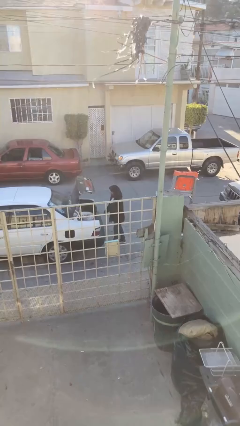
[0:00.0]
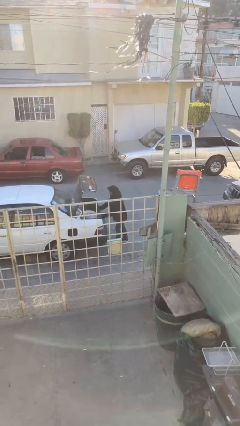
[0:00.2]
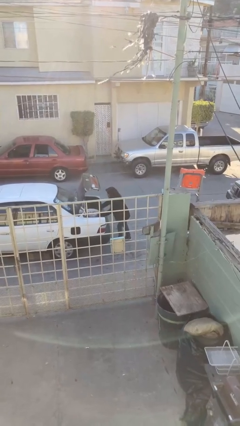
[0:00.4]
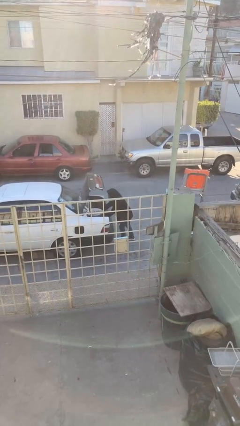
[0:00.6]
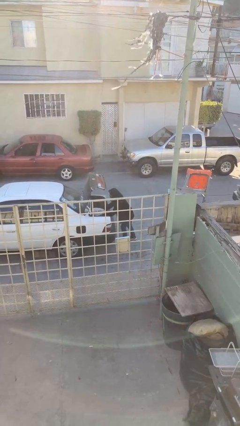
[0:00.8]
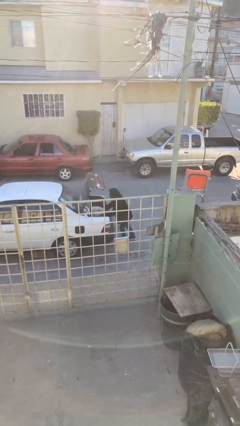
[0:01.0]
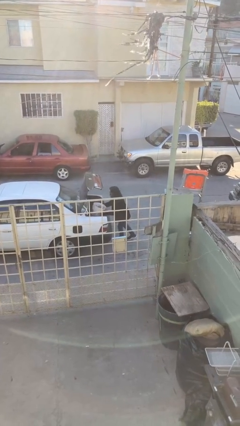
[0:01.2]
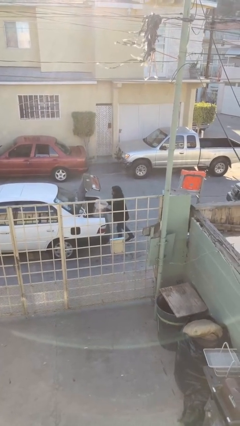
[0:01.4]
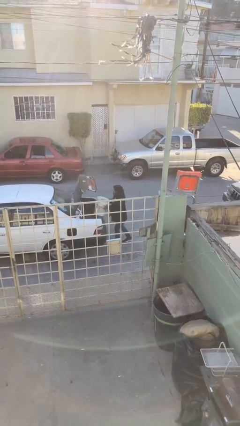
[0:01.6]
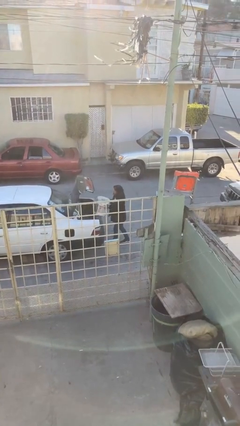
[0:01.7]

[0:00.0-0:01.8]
person unloads car

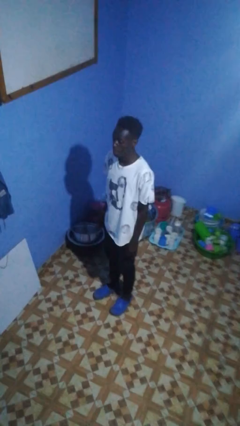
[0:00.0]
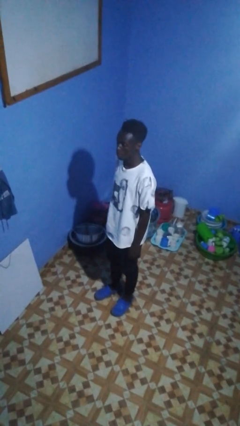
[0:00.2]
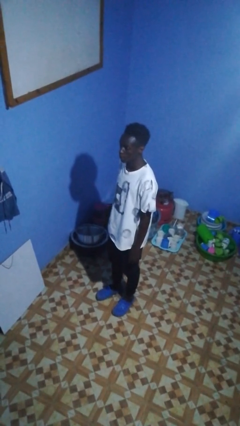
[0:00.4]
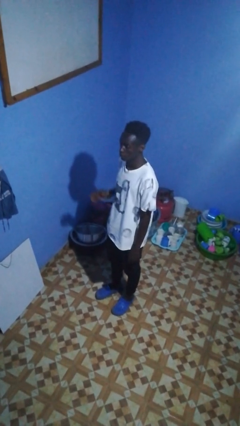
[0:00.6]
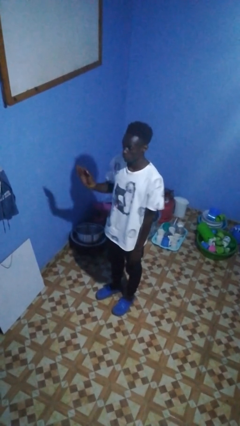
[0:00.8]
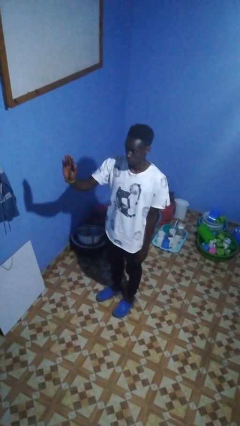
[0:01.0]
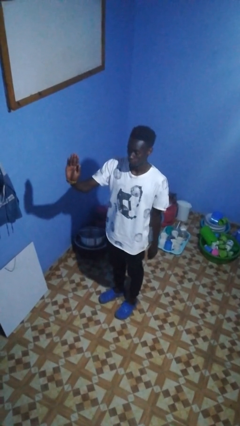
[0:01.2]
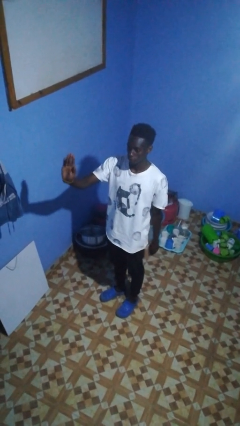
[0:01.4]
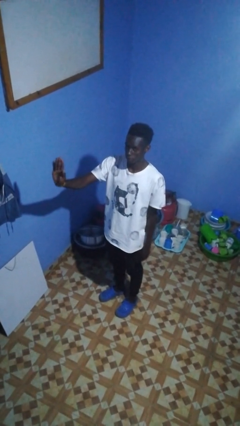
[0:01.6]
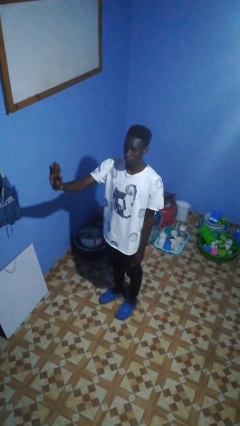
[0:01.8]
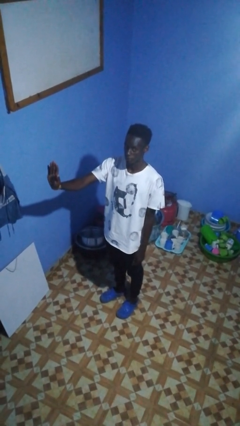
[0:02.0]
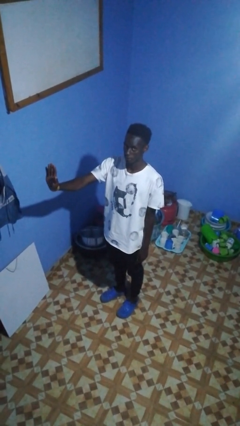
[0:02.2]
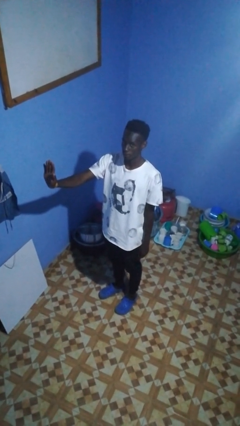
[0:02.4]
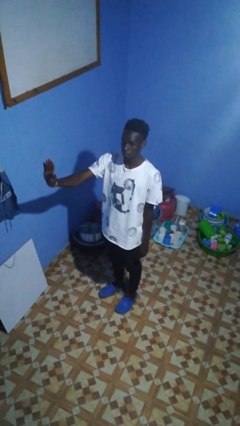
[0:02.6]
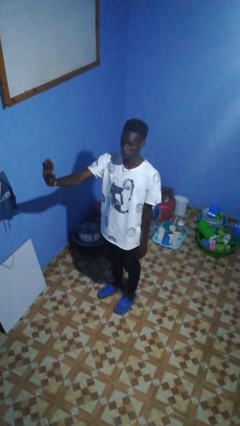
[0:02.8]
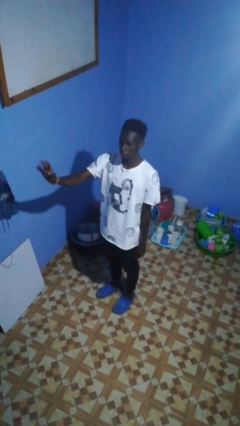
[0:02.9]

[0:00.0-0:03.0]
person gestures stop

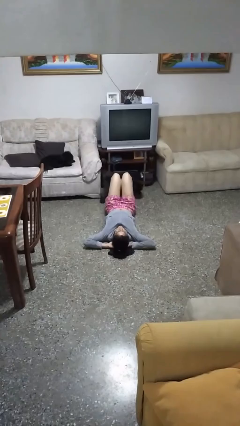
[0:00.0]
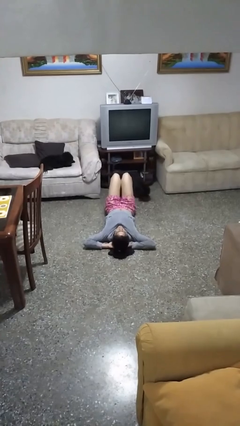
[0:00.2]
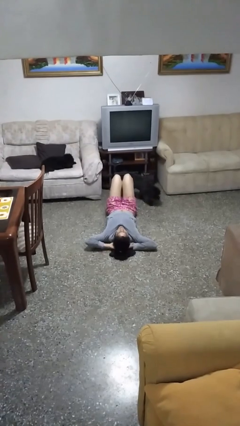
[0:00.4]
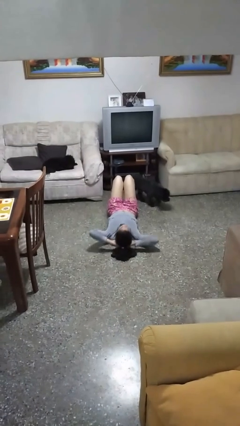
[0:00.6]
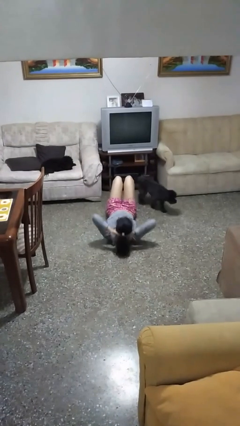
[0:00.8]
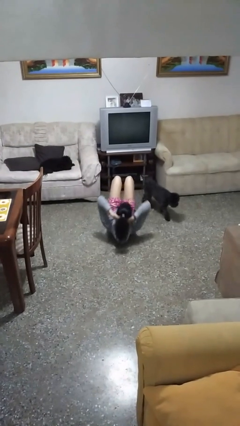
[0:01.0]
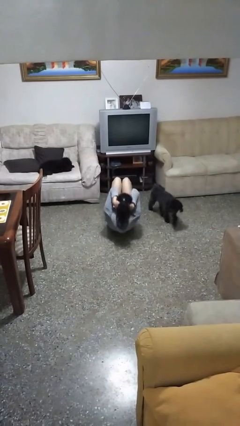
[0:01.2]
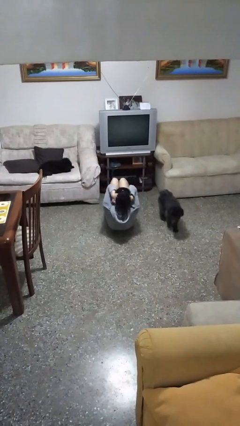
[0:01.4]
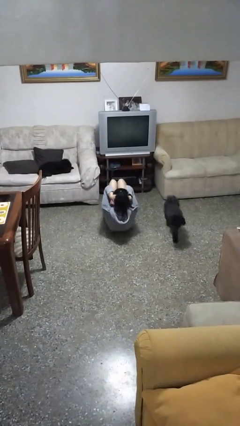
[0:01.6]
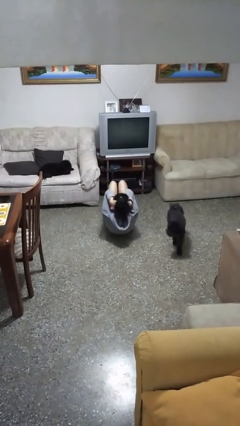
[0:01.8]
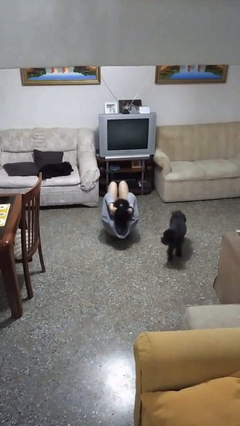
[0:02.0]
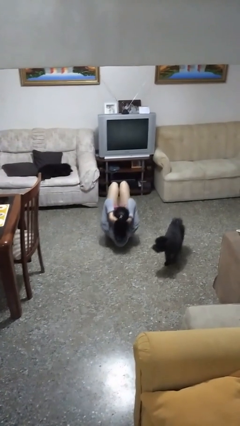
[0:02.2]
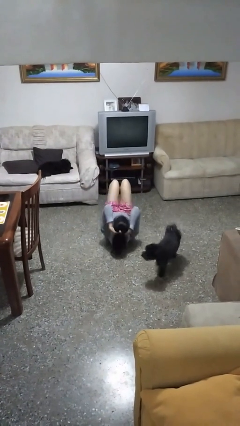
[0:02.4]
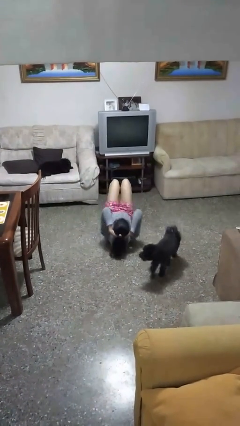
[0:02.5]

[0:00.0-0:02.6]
person exercises with situp

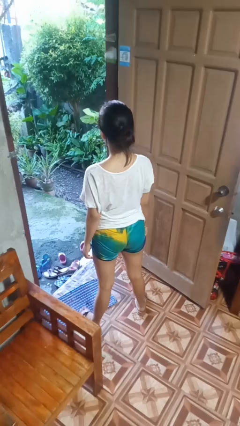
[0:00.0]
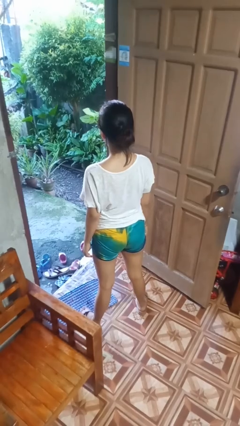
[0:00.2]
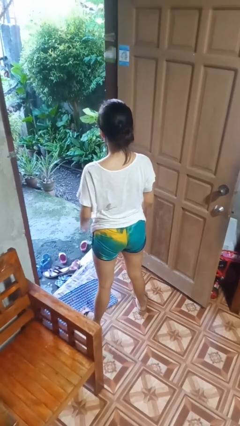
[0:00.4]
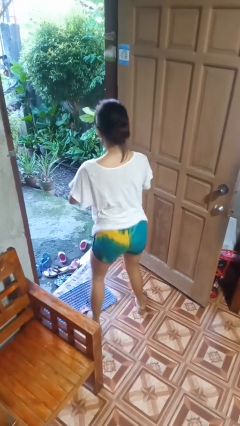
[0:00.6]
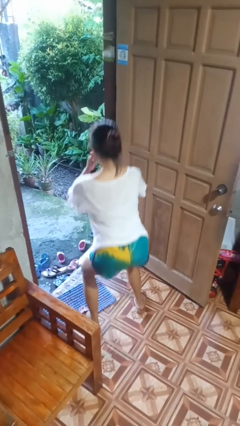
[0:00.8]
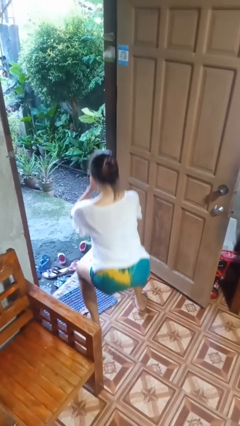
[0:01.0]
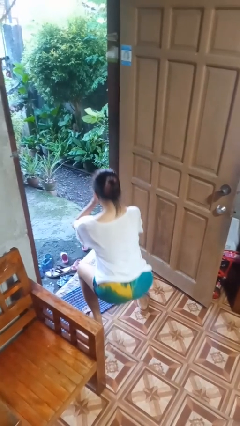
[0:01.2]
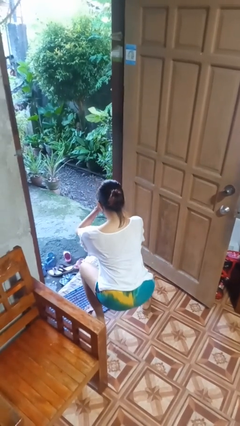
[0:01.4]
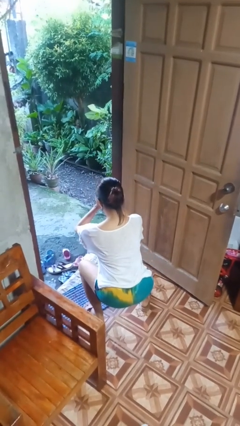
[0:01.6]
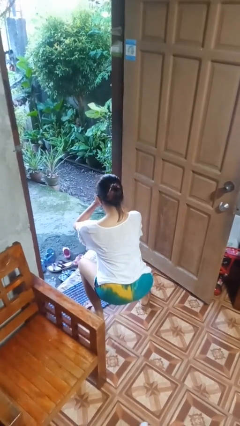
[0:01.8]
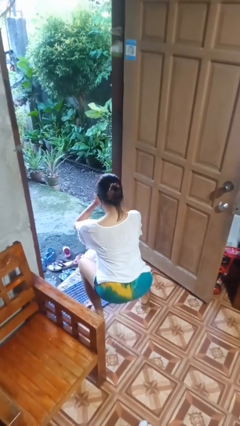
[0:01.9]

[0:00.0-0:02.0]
person squats

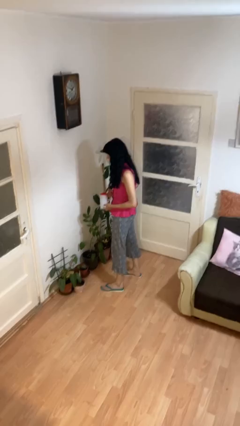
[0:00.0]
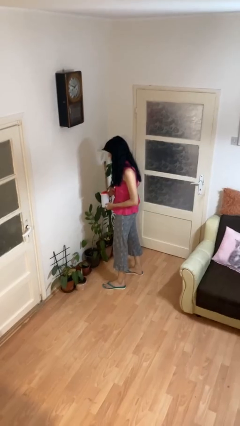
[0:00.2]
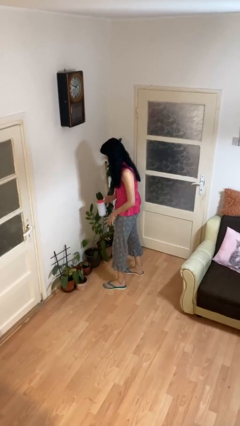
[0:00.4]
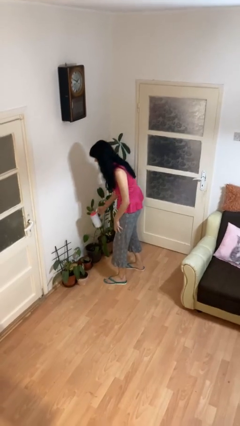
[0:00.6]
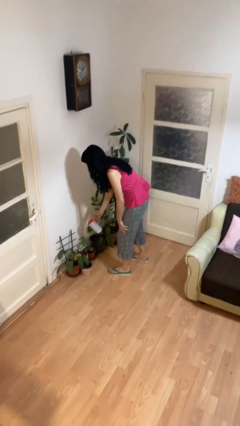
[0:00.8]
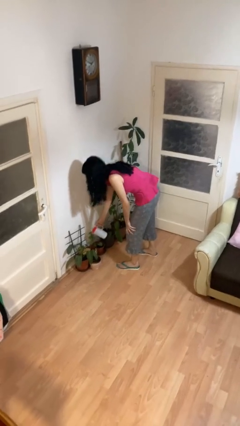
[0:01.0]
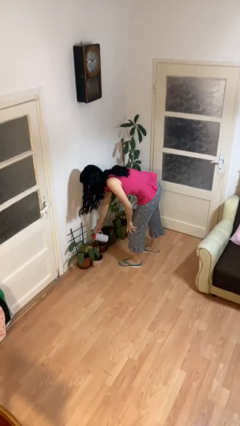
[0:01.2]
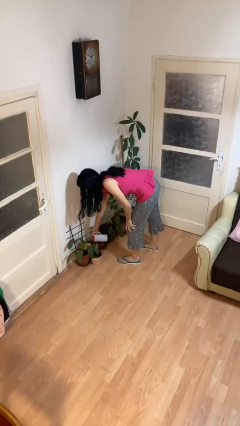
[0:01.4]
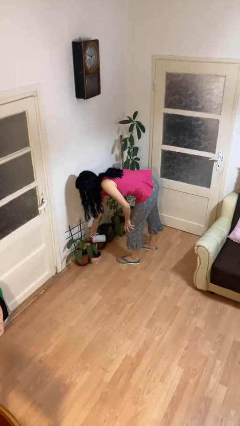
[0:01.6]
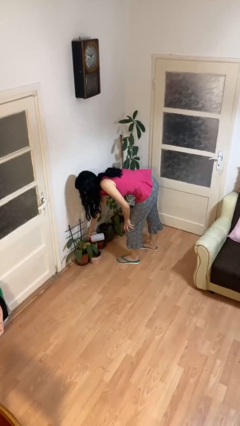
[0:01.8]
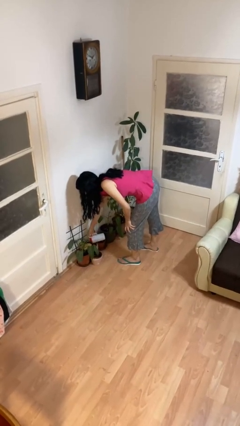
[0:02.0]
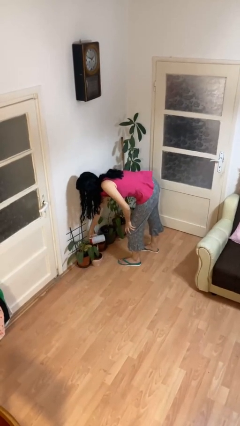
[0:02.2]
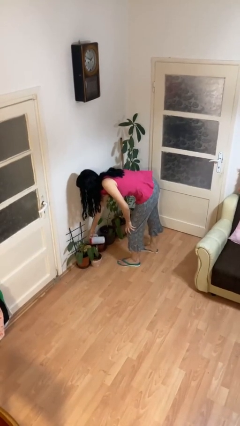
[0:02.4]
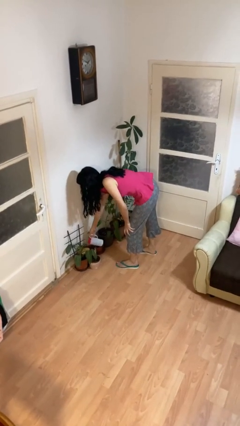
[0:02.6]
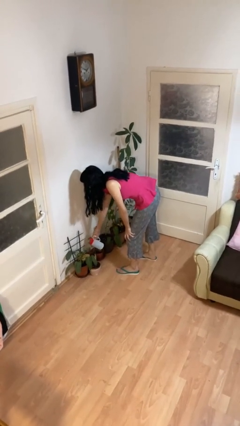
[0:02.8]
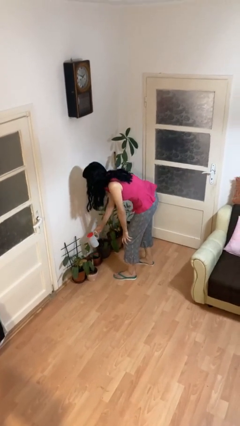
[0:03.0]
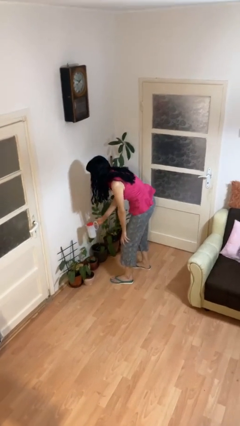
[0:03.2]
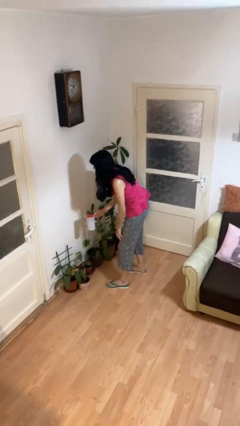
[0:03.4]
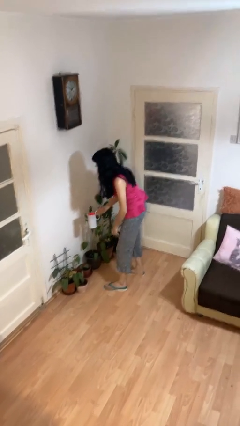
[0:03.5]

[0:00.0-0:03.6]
person waters houseplant

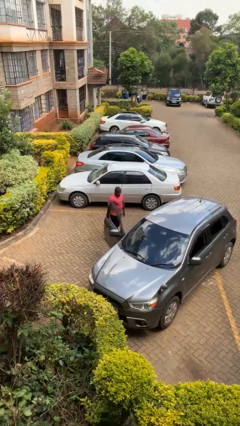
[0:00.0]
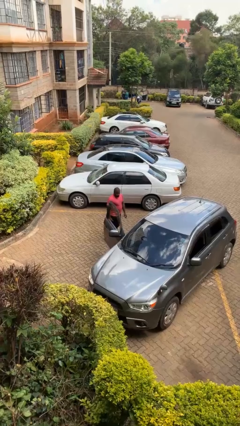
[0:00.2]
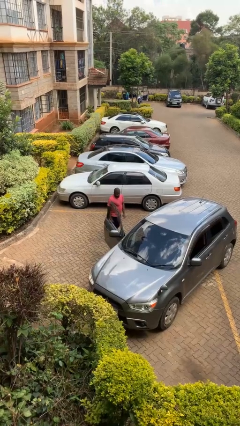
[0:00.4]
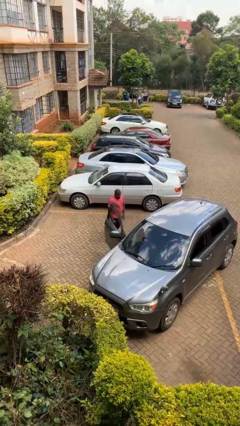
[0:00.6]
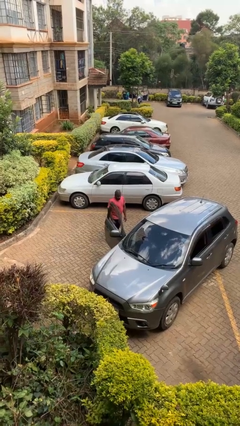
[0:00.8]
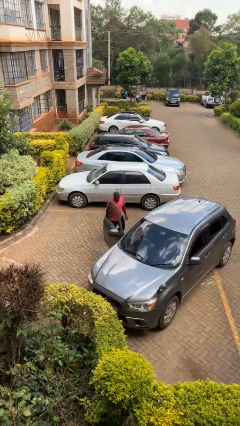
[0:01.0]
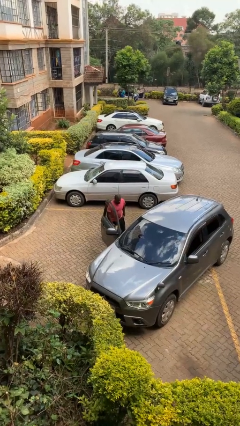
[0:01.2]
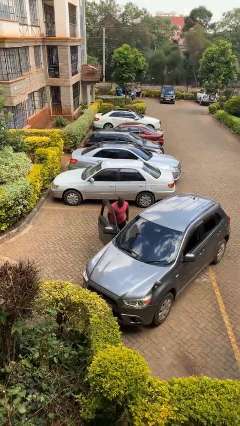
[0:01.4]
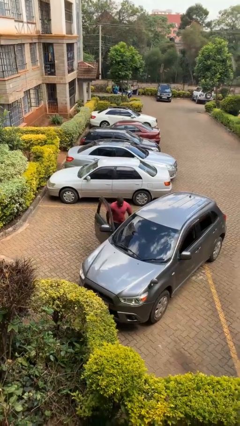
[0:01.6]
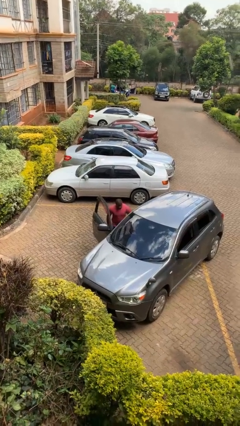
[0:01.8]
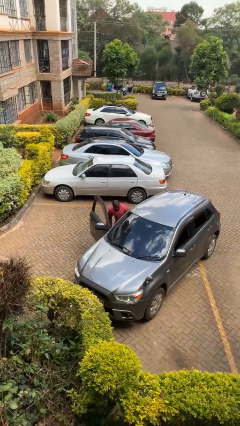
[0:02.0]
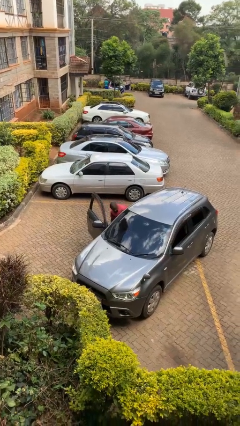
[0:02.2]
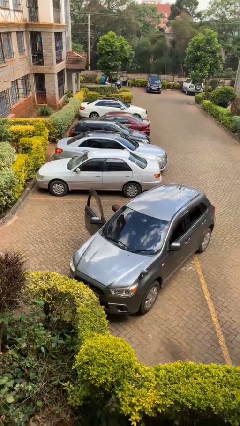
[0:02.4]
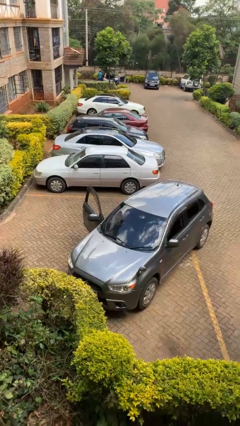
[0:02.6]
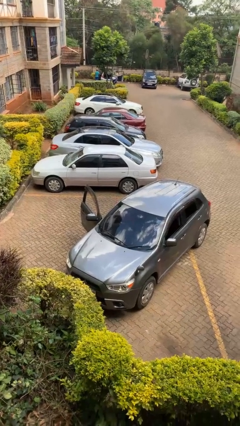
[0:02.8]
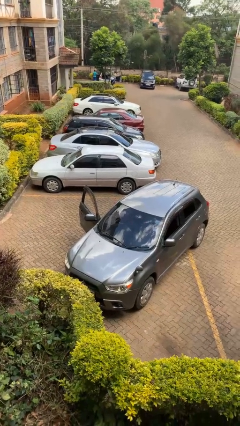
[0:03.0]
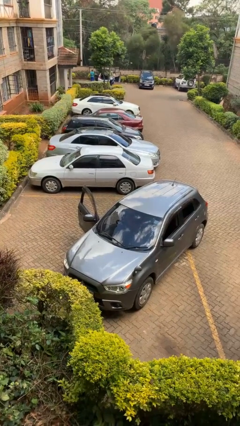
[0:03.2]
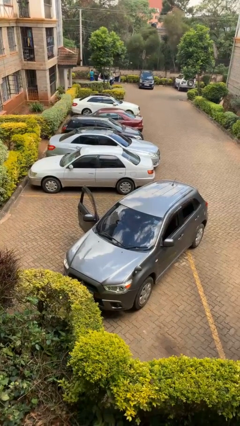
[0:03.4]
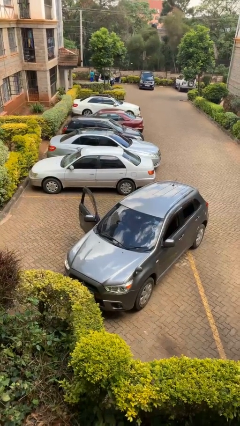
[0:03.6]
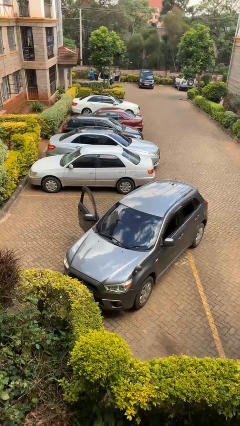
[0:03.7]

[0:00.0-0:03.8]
person enters car

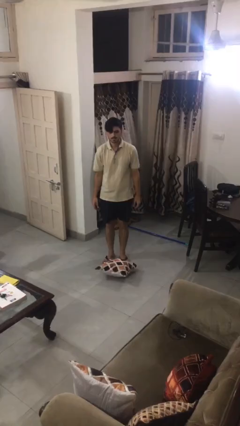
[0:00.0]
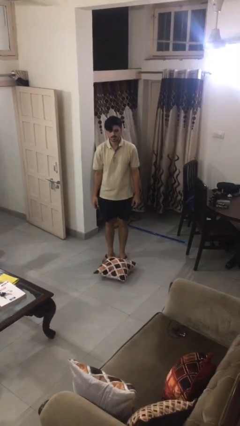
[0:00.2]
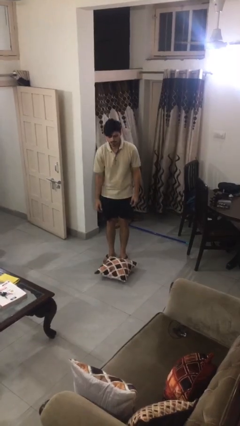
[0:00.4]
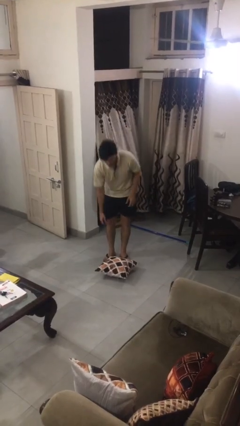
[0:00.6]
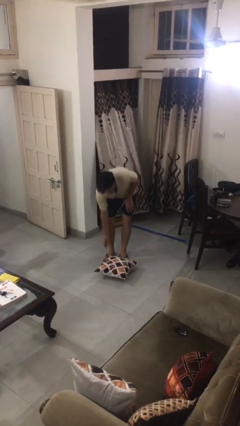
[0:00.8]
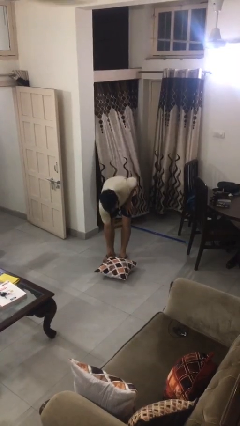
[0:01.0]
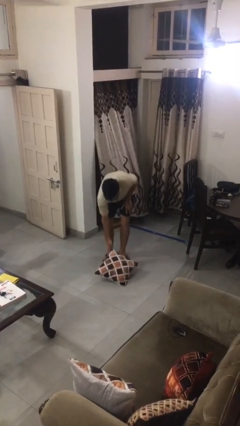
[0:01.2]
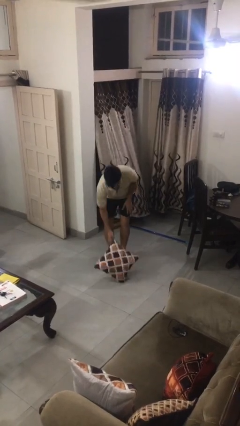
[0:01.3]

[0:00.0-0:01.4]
person picks up object from floor
